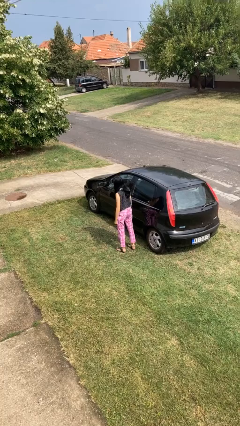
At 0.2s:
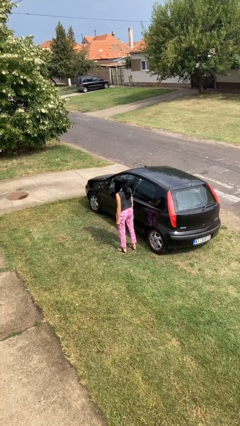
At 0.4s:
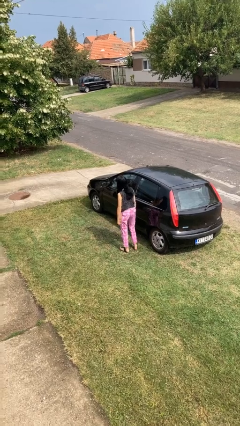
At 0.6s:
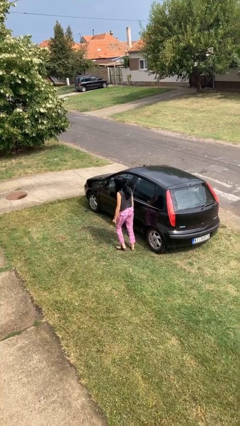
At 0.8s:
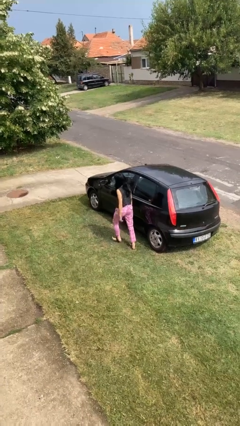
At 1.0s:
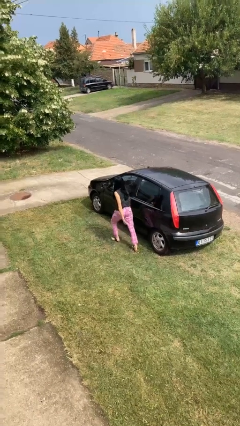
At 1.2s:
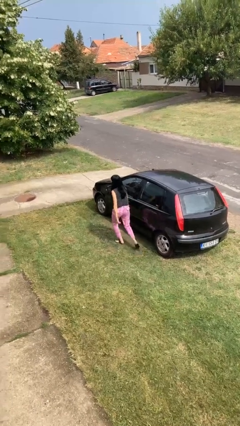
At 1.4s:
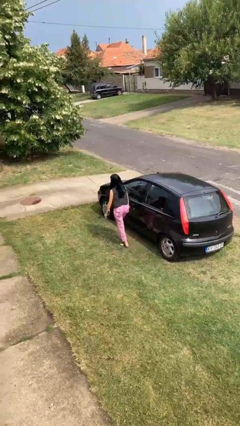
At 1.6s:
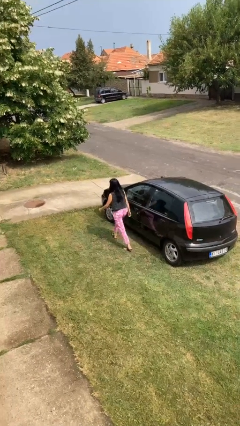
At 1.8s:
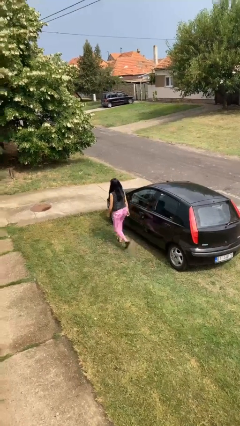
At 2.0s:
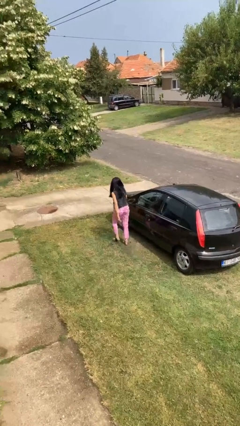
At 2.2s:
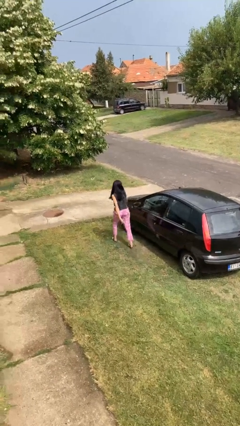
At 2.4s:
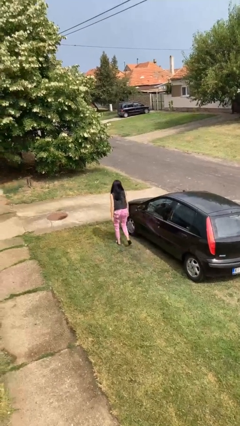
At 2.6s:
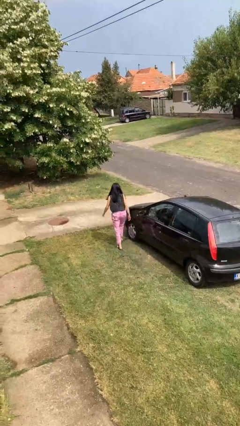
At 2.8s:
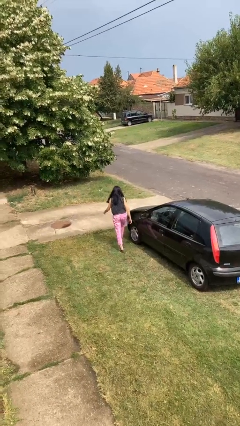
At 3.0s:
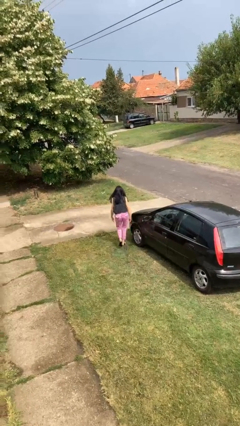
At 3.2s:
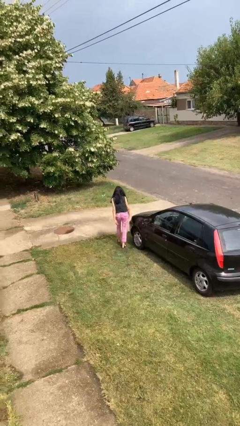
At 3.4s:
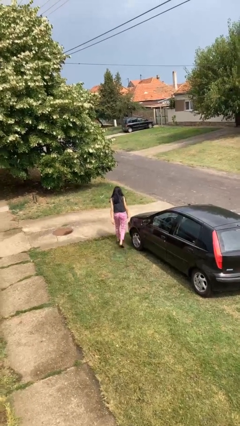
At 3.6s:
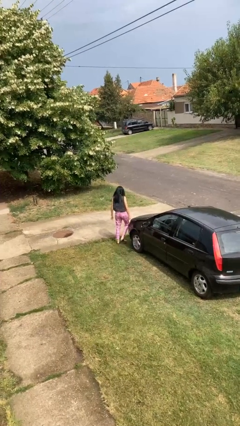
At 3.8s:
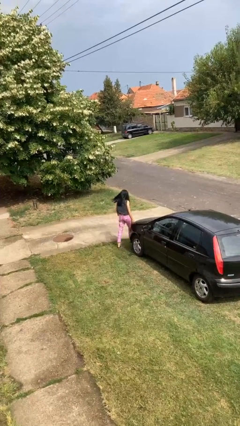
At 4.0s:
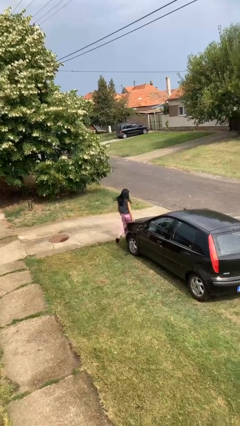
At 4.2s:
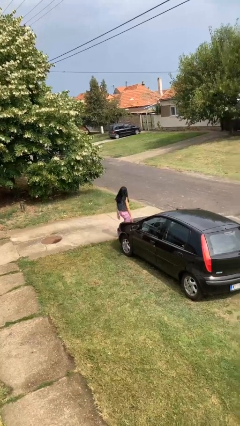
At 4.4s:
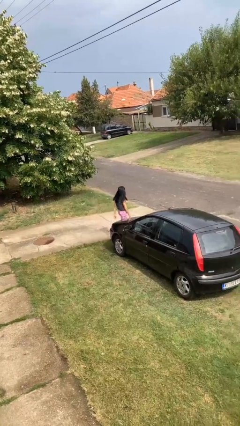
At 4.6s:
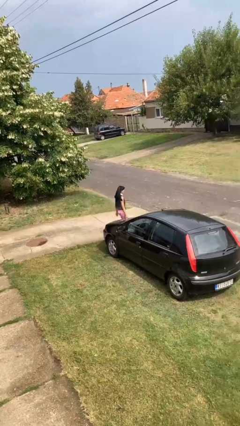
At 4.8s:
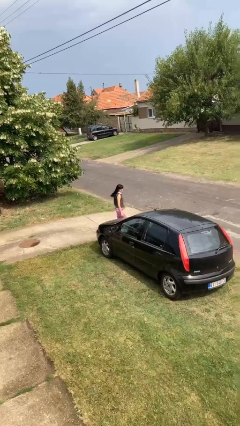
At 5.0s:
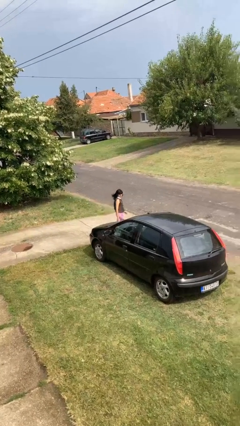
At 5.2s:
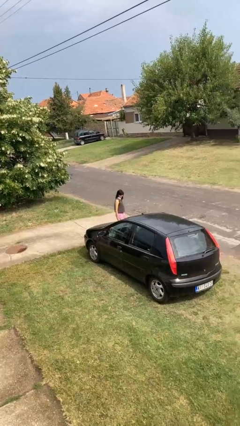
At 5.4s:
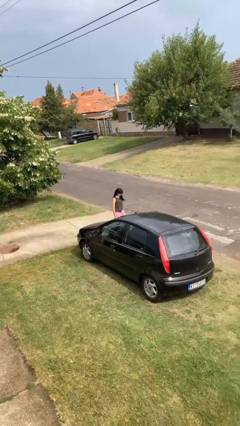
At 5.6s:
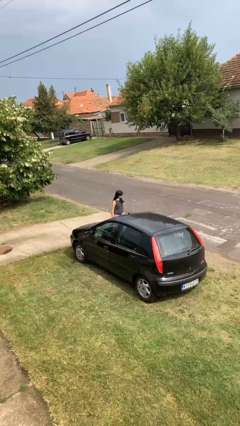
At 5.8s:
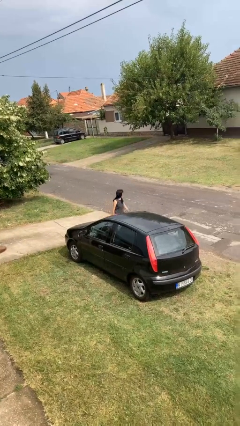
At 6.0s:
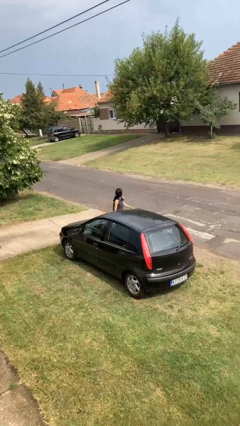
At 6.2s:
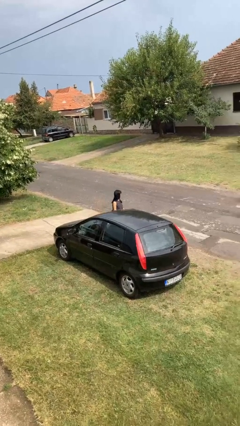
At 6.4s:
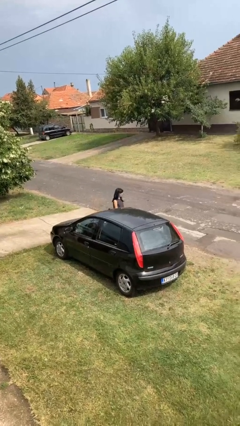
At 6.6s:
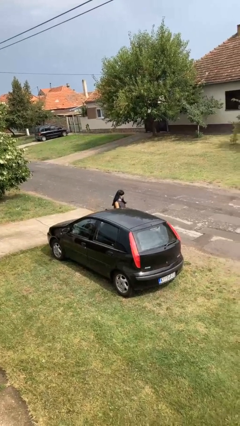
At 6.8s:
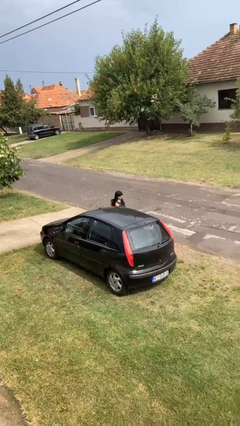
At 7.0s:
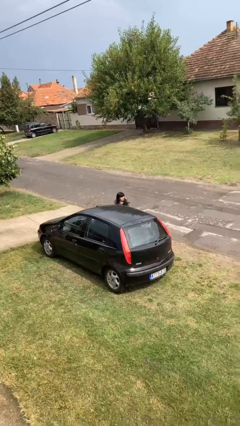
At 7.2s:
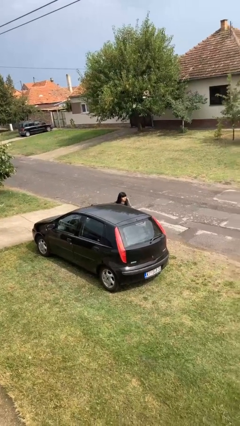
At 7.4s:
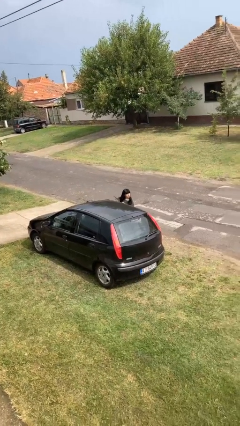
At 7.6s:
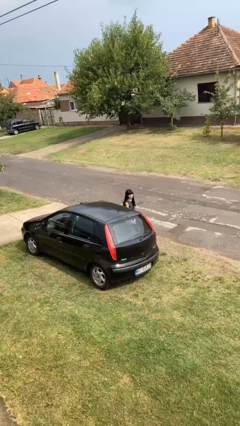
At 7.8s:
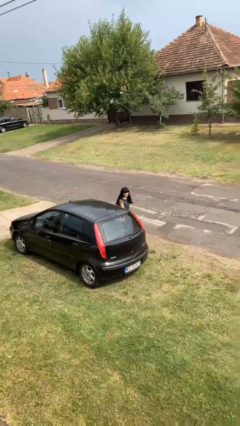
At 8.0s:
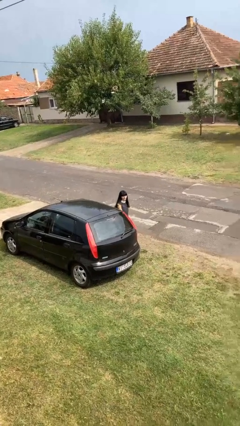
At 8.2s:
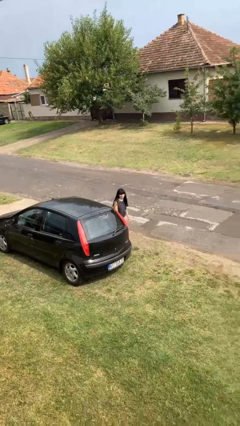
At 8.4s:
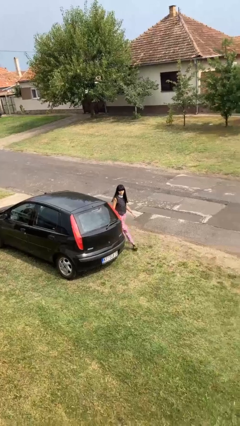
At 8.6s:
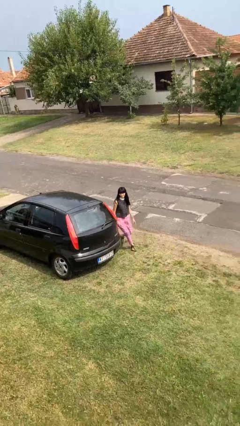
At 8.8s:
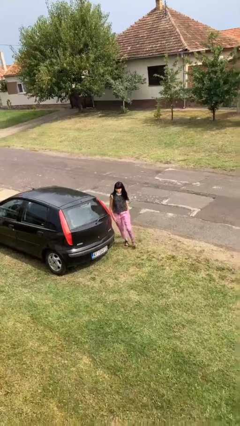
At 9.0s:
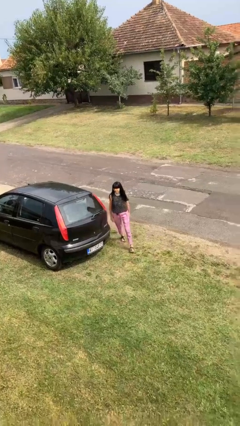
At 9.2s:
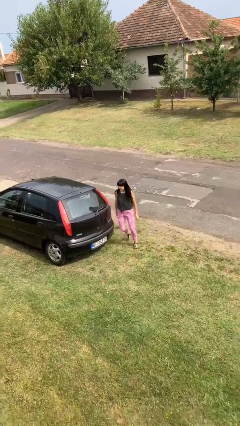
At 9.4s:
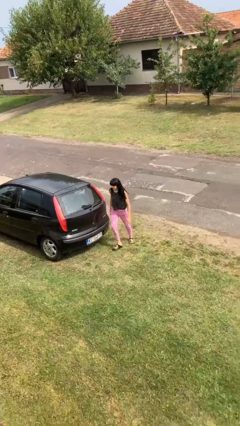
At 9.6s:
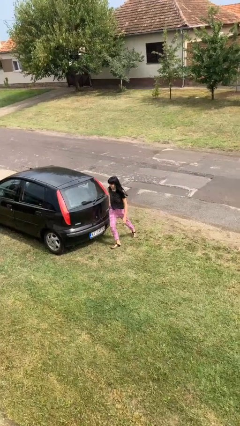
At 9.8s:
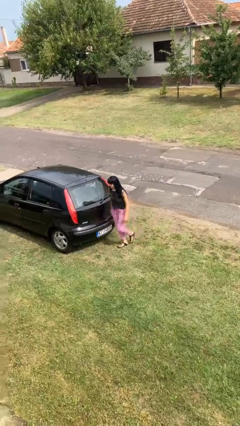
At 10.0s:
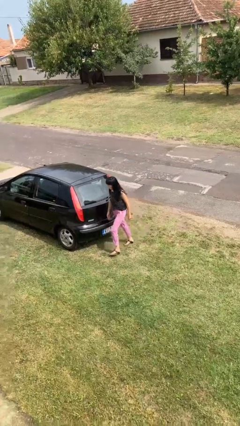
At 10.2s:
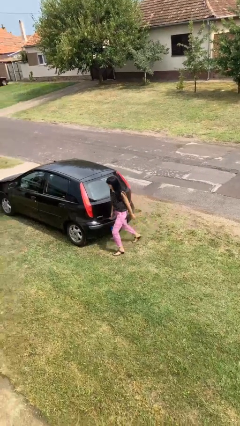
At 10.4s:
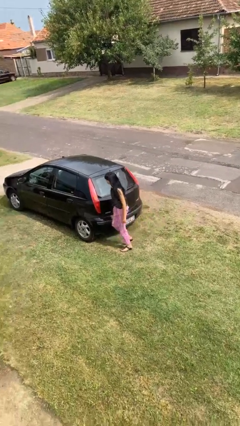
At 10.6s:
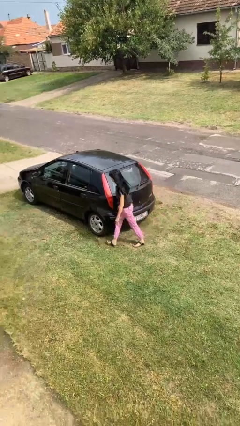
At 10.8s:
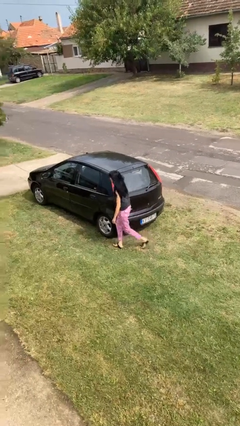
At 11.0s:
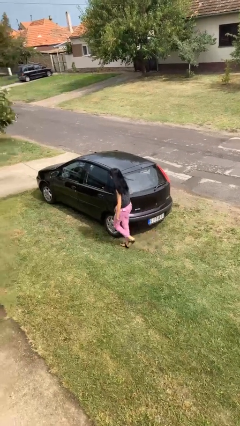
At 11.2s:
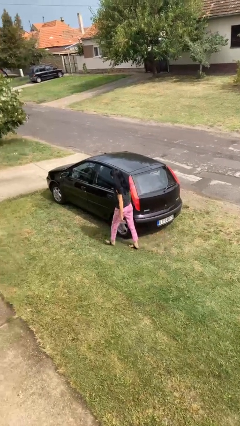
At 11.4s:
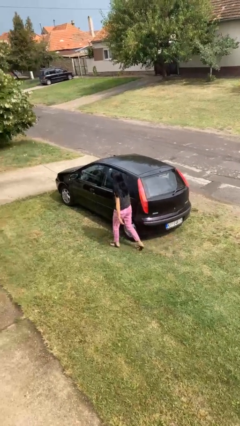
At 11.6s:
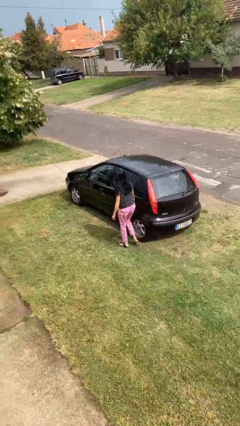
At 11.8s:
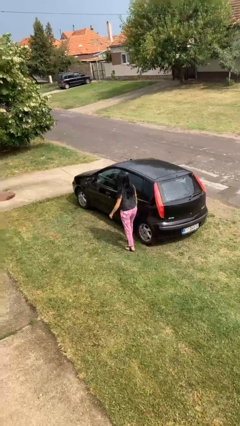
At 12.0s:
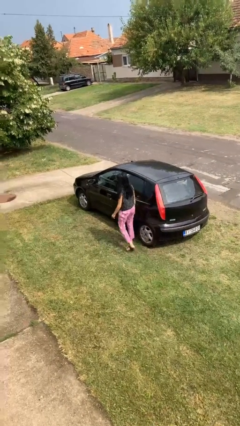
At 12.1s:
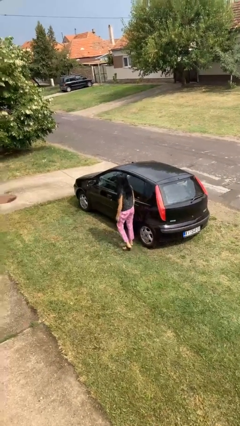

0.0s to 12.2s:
person walks around car

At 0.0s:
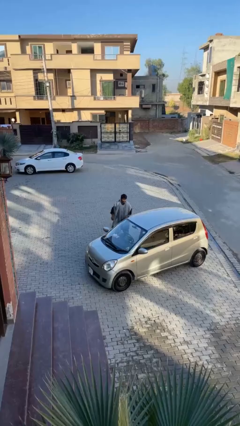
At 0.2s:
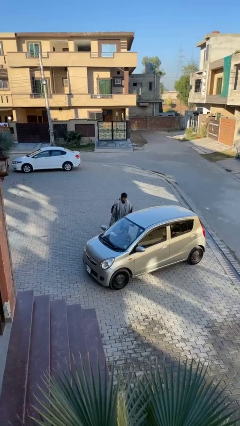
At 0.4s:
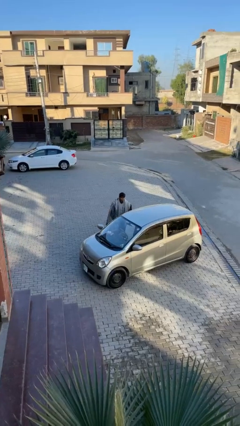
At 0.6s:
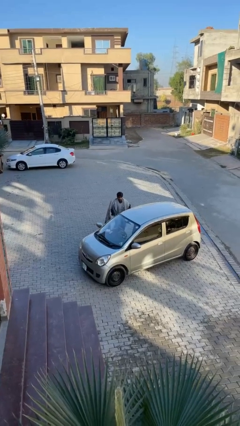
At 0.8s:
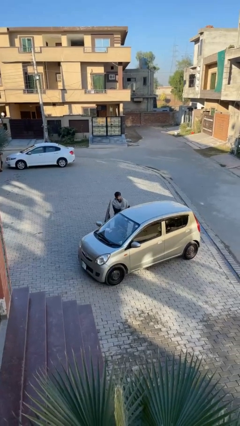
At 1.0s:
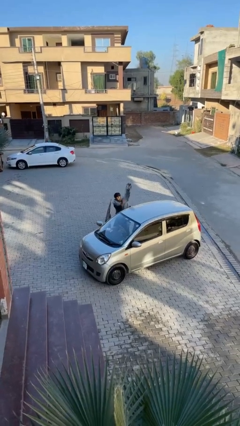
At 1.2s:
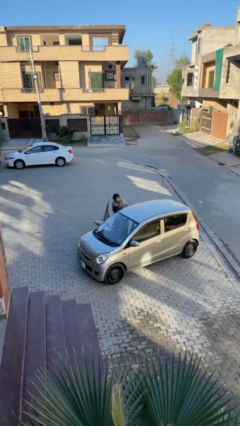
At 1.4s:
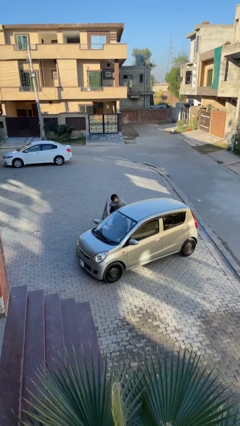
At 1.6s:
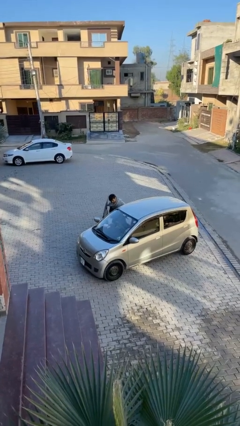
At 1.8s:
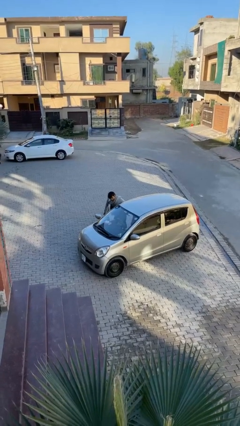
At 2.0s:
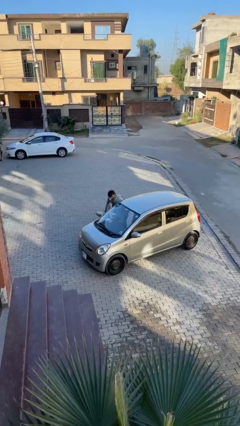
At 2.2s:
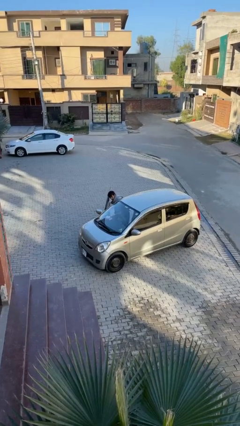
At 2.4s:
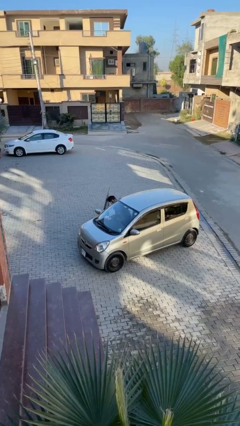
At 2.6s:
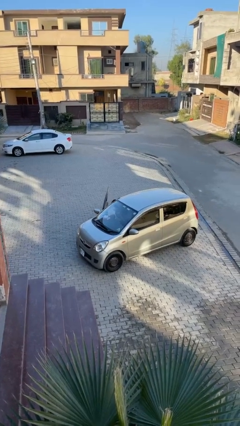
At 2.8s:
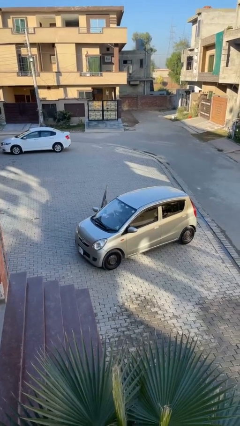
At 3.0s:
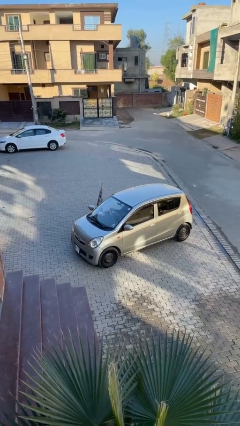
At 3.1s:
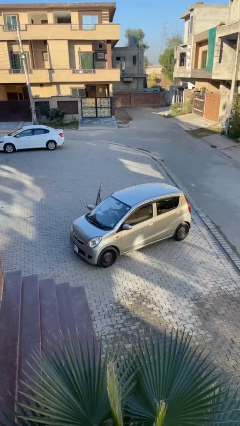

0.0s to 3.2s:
person enters car

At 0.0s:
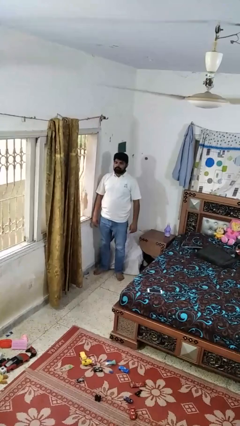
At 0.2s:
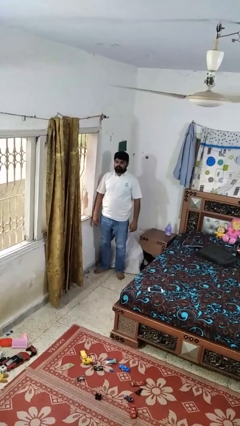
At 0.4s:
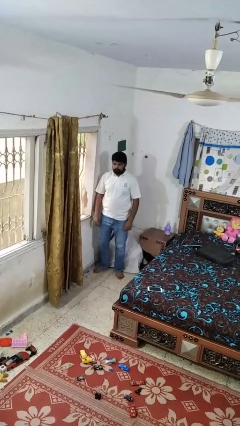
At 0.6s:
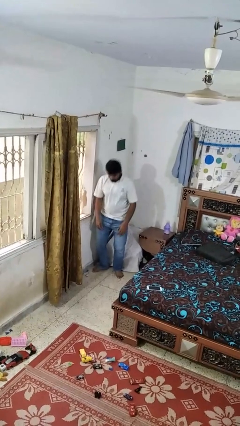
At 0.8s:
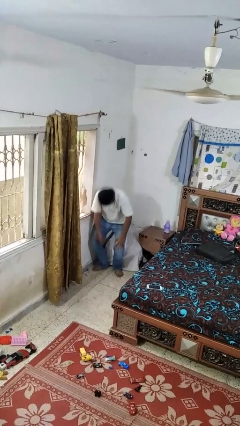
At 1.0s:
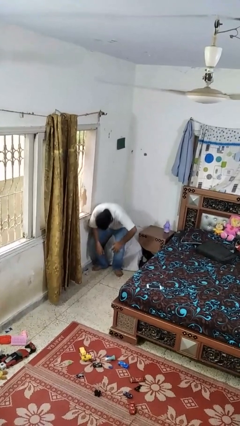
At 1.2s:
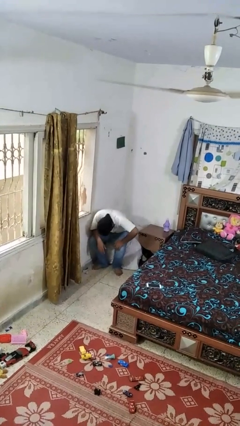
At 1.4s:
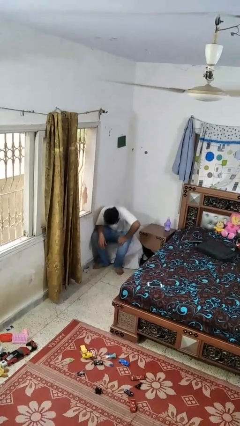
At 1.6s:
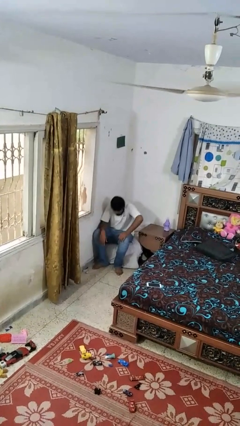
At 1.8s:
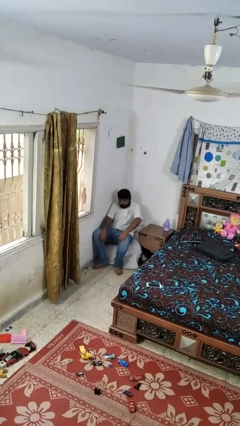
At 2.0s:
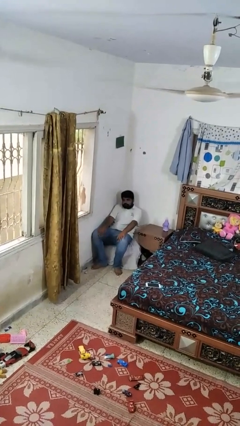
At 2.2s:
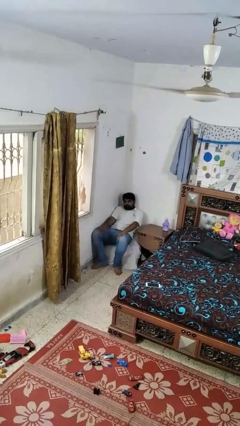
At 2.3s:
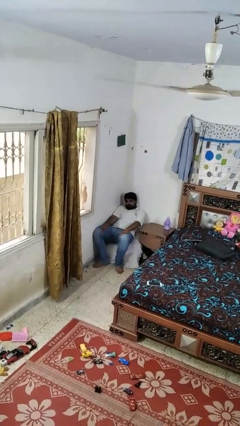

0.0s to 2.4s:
person lies down on couch
